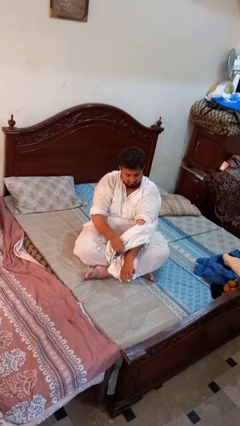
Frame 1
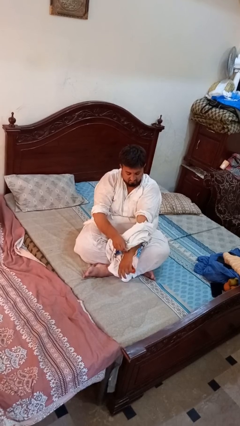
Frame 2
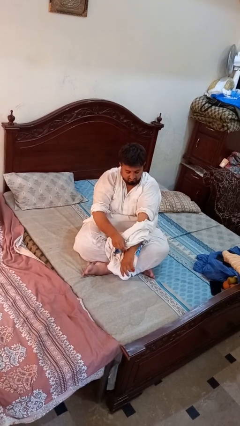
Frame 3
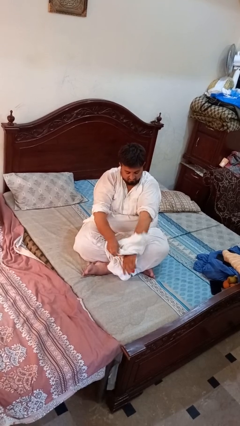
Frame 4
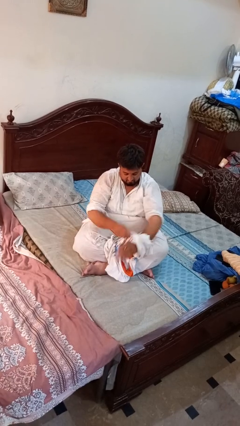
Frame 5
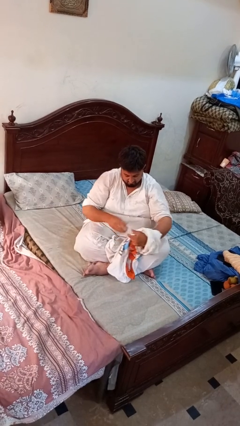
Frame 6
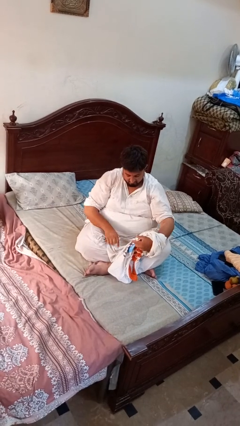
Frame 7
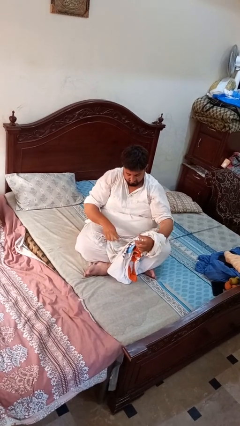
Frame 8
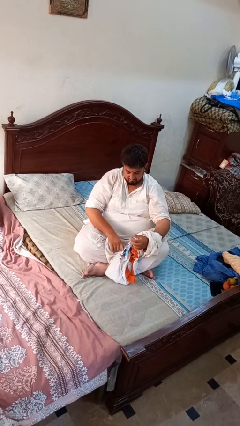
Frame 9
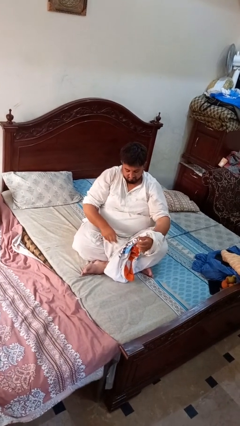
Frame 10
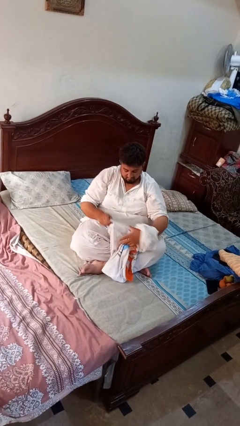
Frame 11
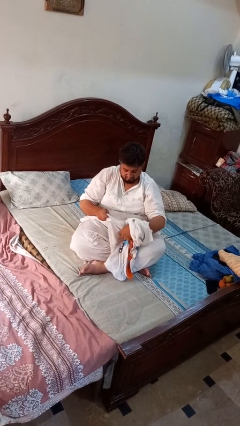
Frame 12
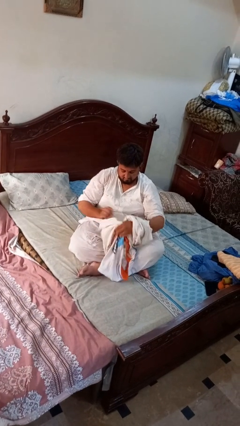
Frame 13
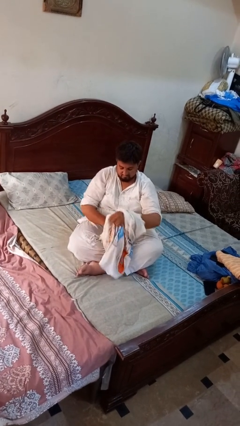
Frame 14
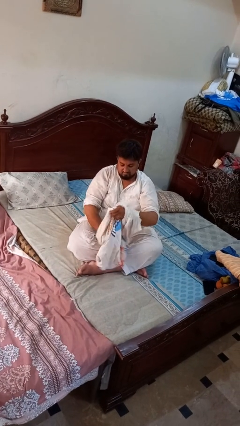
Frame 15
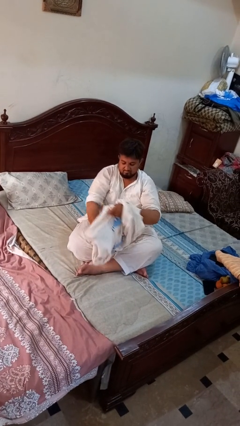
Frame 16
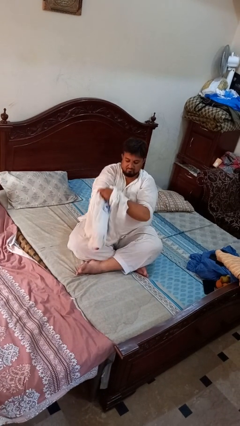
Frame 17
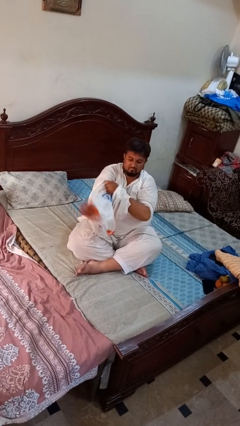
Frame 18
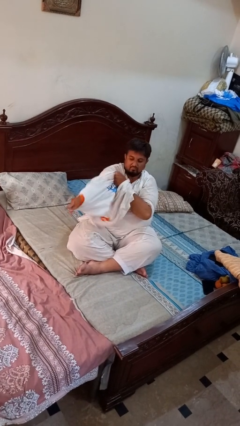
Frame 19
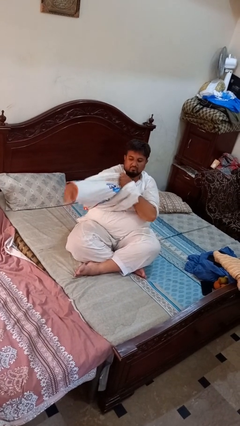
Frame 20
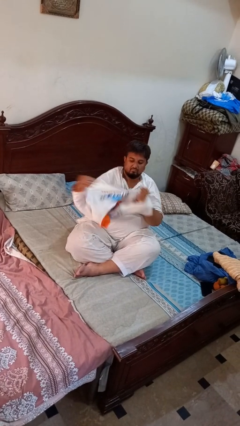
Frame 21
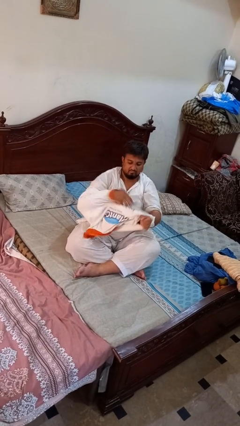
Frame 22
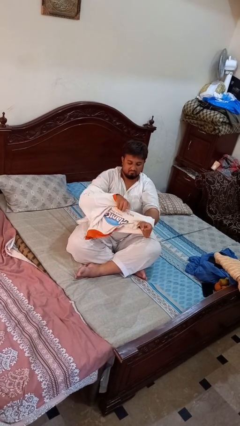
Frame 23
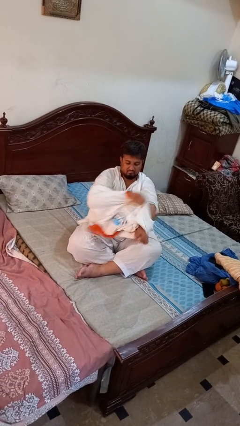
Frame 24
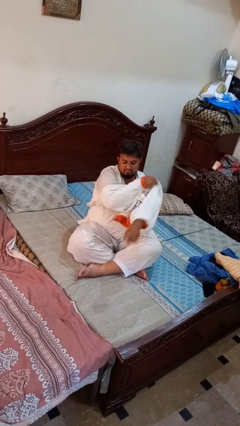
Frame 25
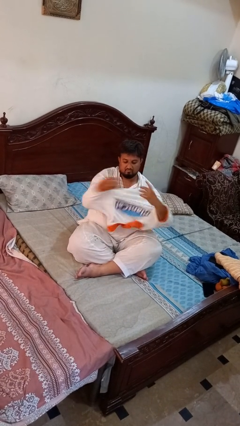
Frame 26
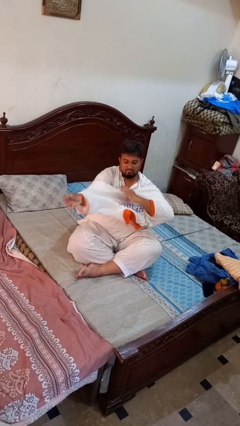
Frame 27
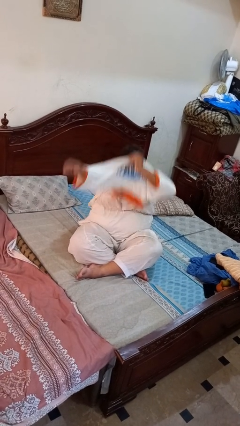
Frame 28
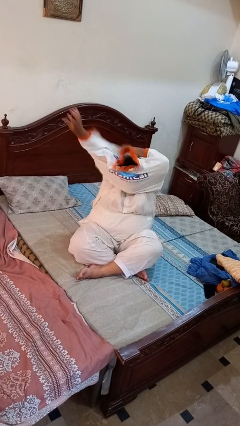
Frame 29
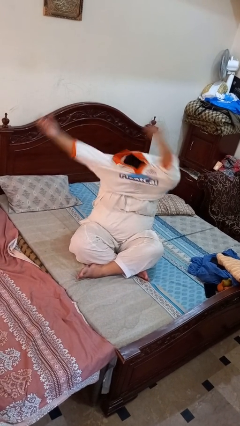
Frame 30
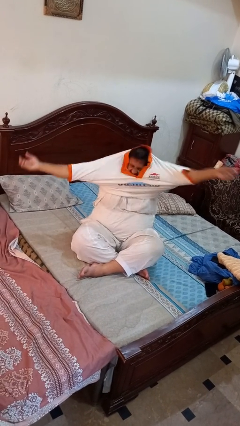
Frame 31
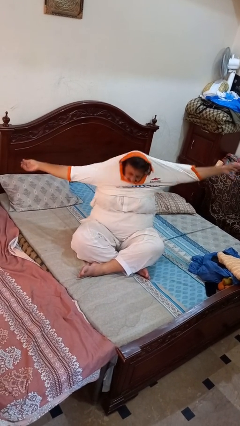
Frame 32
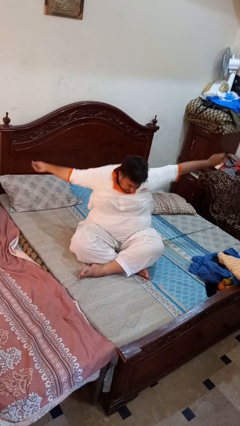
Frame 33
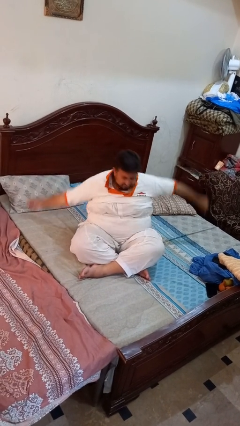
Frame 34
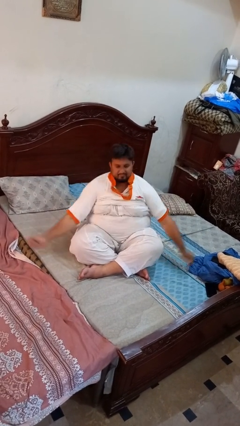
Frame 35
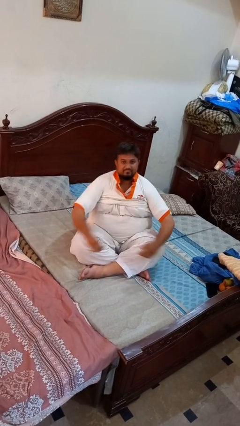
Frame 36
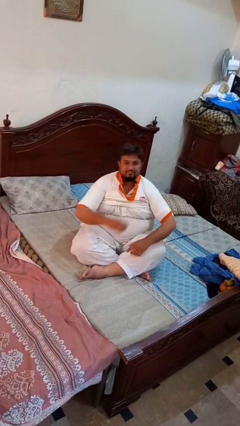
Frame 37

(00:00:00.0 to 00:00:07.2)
person puts on shirt

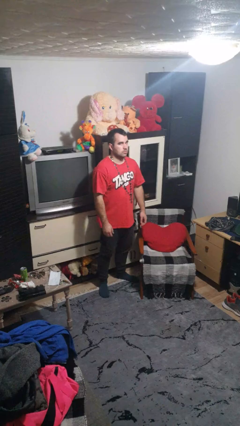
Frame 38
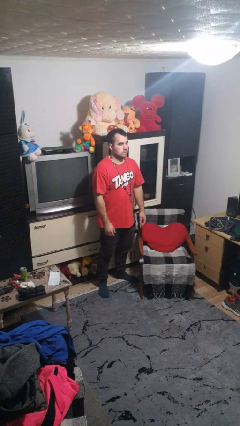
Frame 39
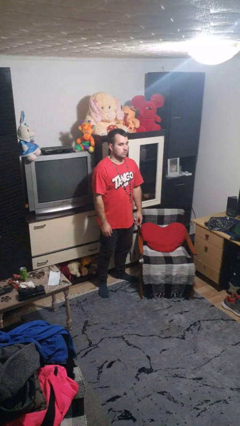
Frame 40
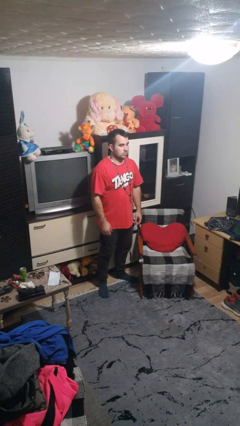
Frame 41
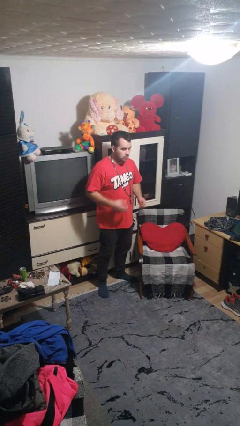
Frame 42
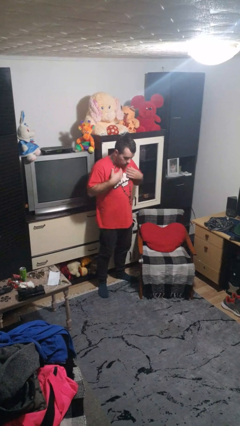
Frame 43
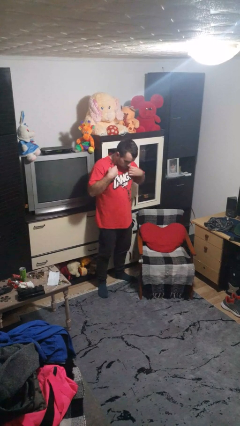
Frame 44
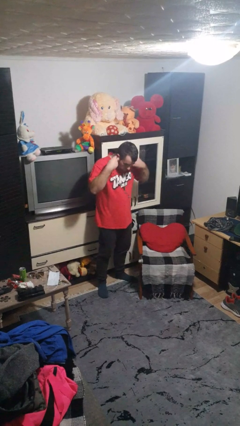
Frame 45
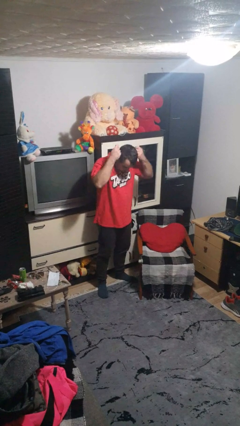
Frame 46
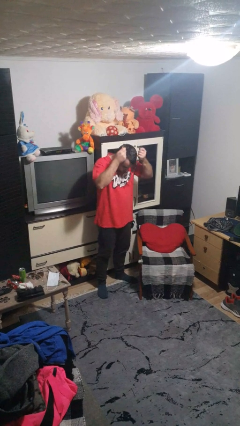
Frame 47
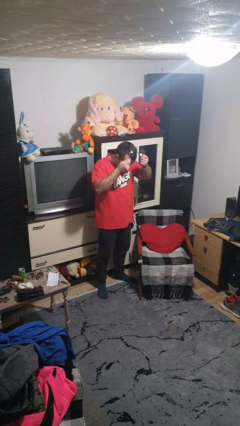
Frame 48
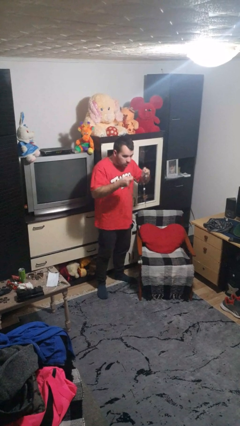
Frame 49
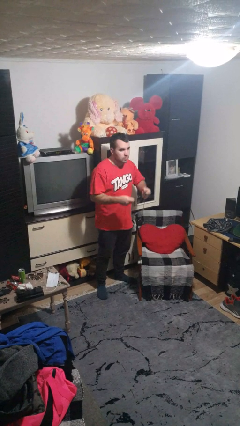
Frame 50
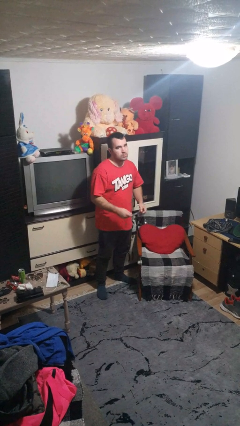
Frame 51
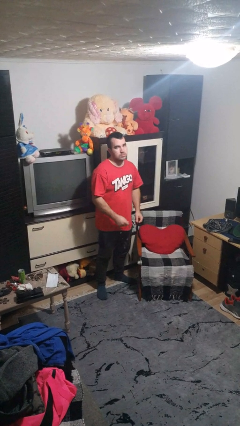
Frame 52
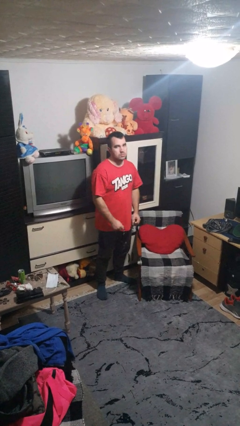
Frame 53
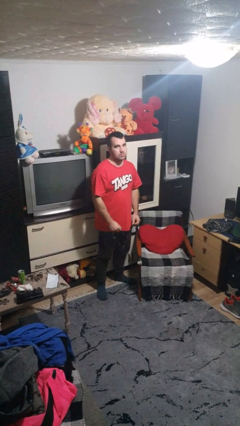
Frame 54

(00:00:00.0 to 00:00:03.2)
person takes off necklace

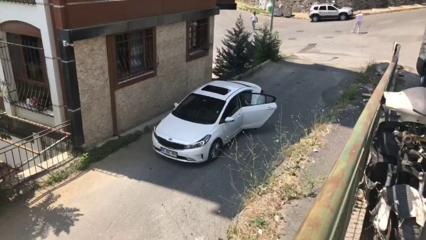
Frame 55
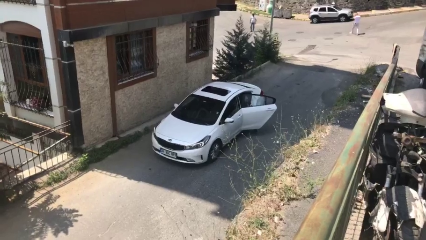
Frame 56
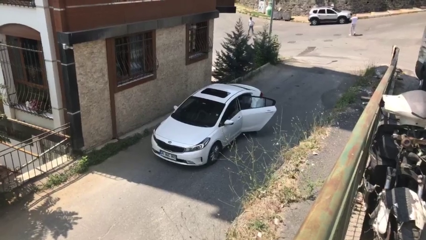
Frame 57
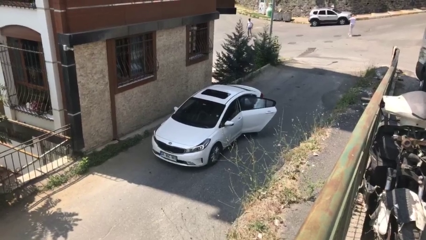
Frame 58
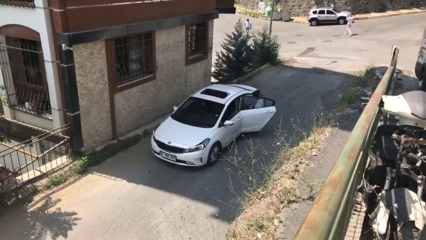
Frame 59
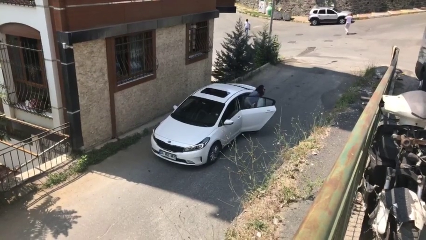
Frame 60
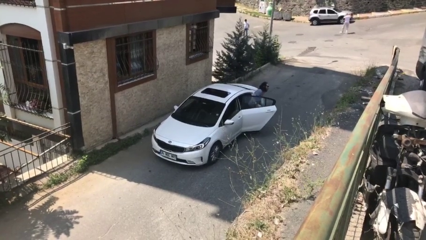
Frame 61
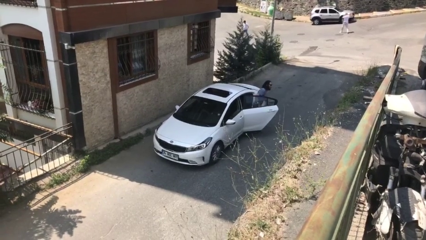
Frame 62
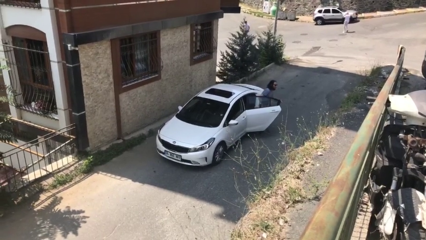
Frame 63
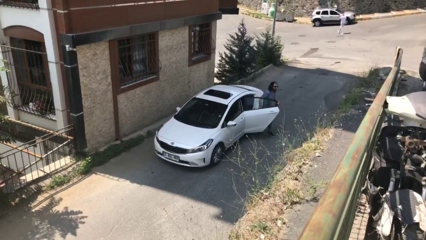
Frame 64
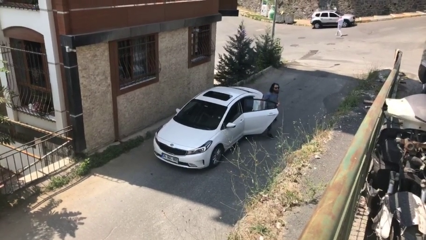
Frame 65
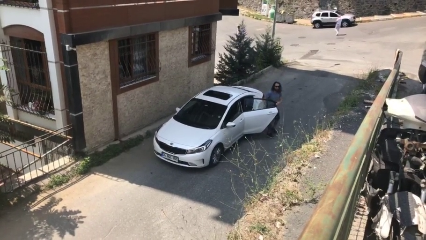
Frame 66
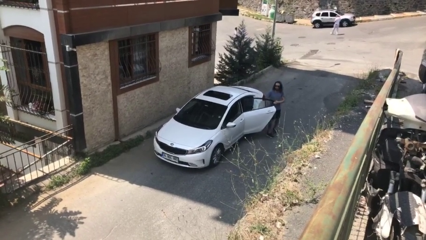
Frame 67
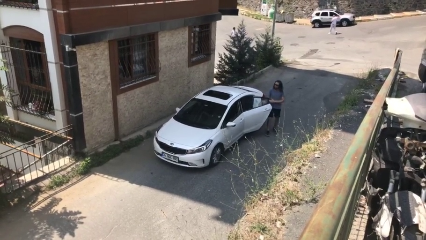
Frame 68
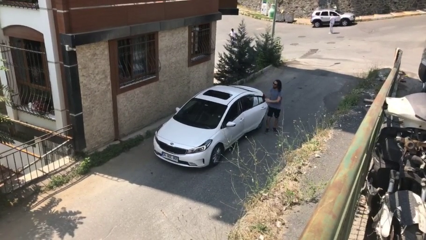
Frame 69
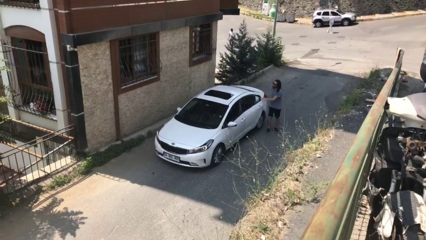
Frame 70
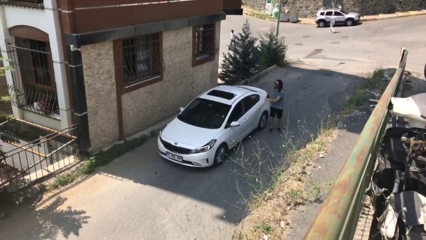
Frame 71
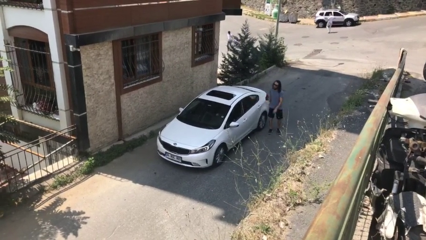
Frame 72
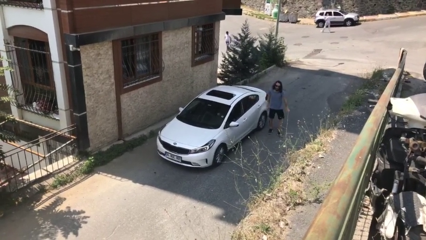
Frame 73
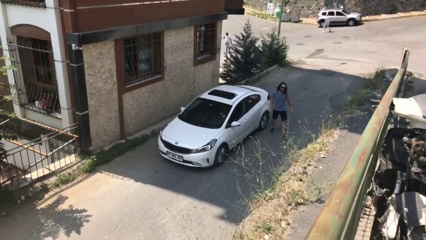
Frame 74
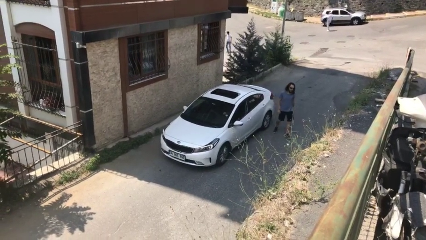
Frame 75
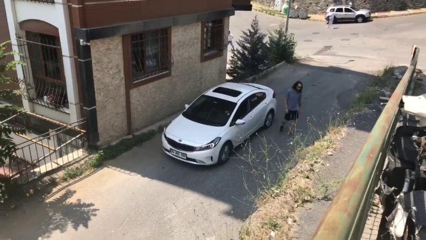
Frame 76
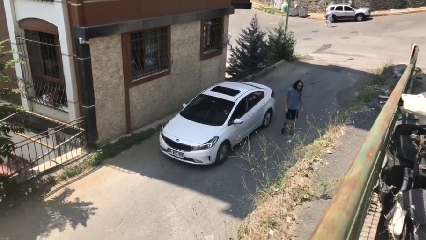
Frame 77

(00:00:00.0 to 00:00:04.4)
car drops off person

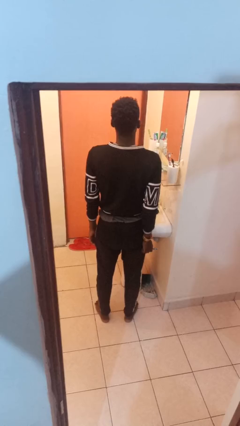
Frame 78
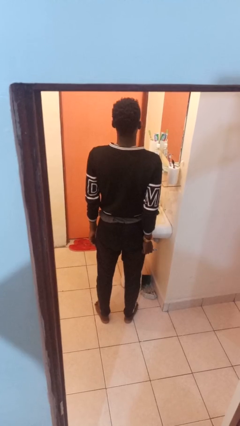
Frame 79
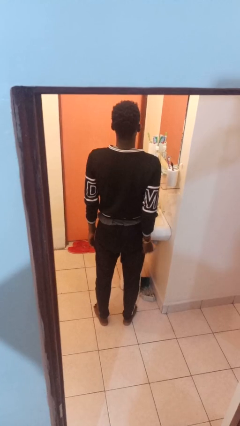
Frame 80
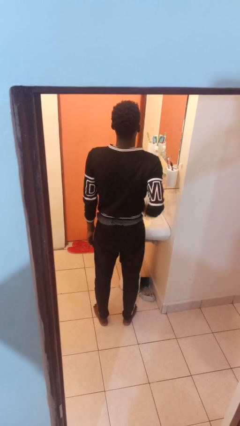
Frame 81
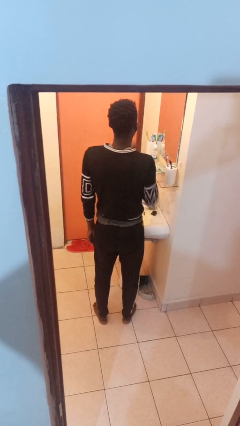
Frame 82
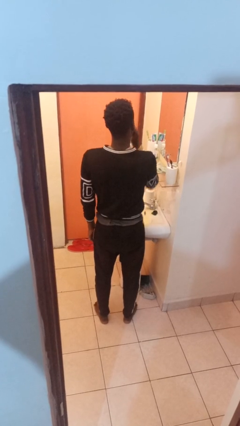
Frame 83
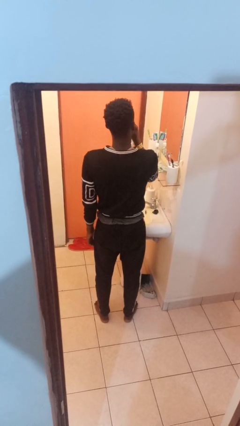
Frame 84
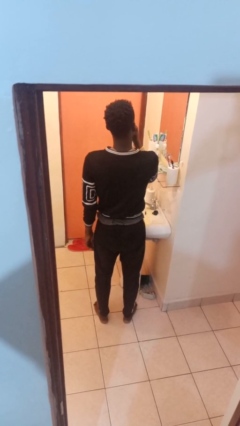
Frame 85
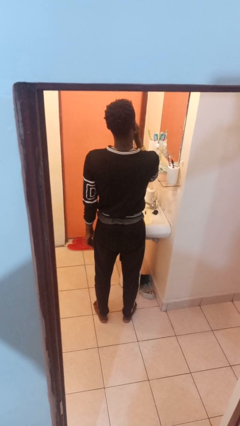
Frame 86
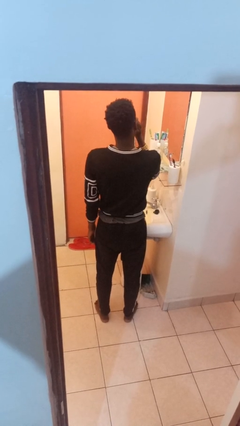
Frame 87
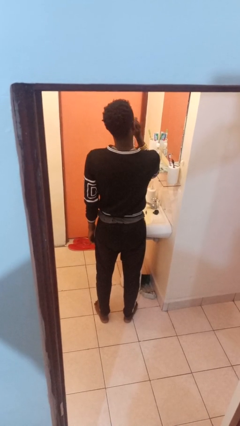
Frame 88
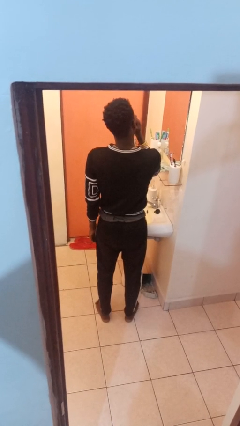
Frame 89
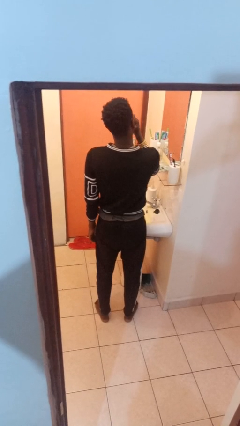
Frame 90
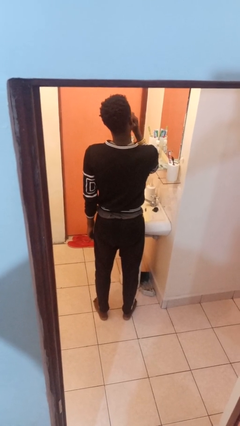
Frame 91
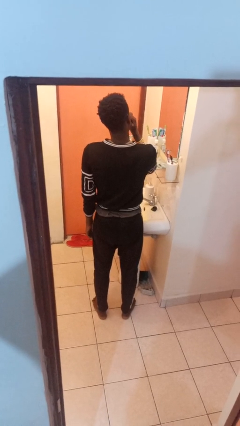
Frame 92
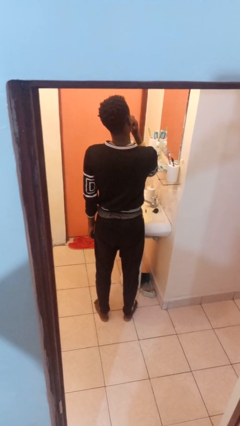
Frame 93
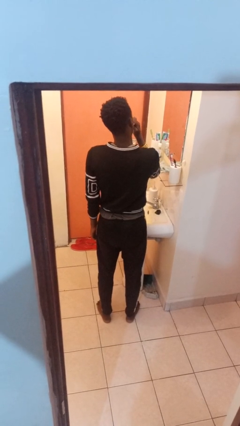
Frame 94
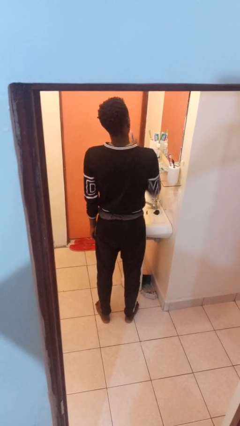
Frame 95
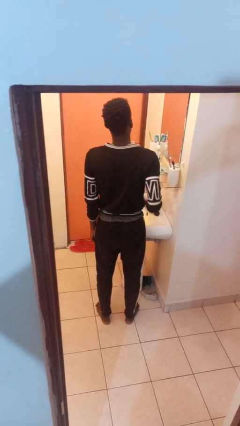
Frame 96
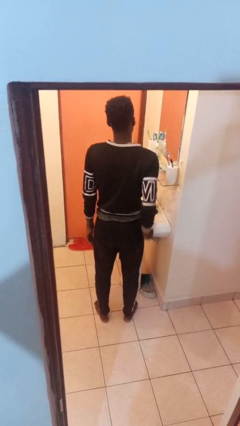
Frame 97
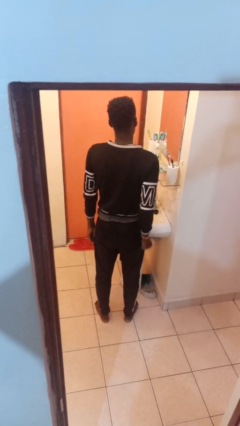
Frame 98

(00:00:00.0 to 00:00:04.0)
person brushes teeth
